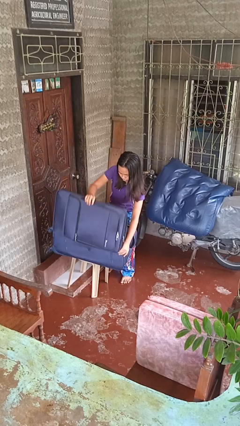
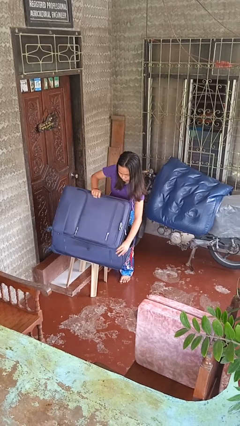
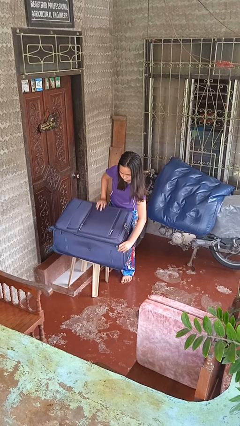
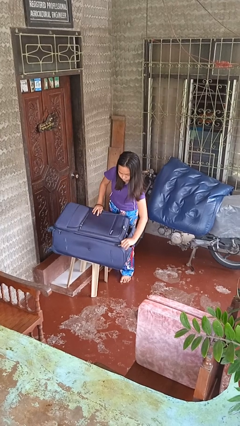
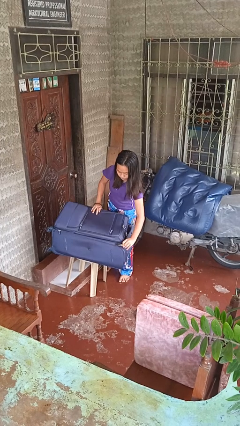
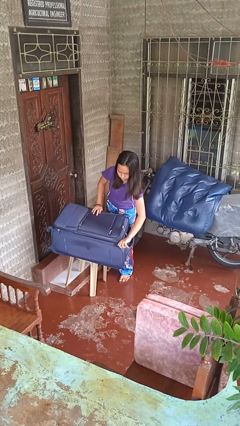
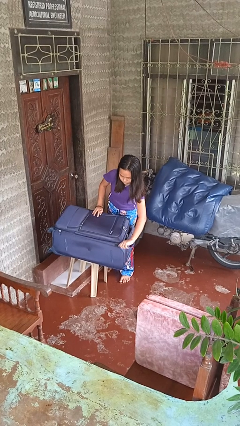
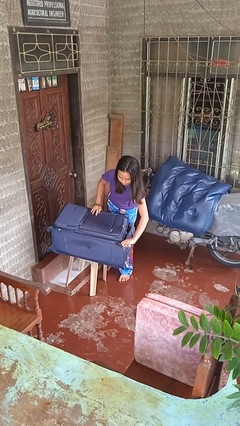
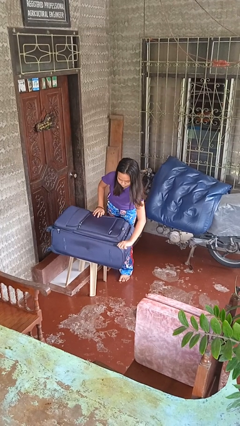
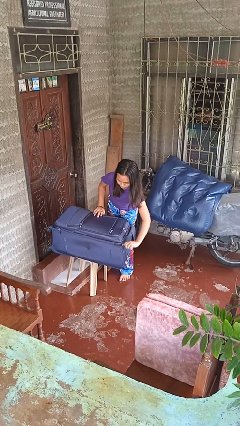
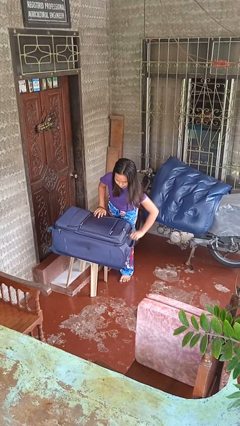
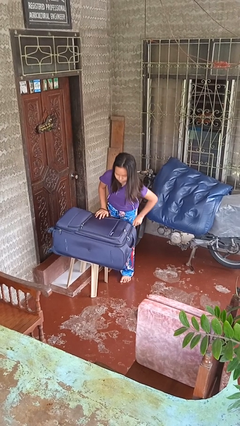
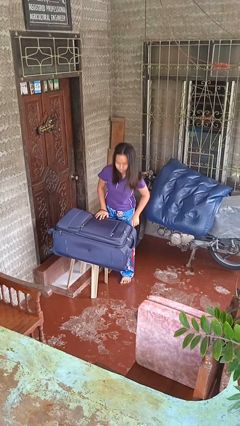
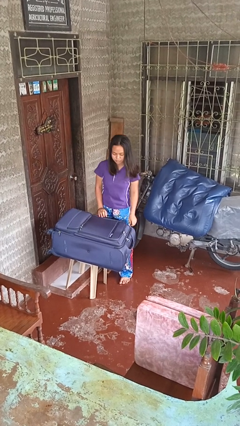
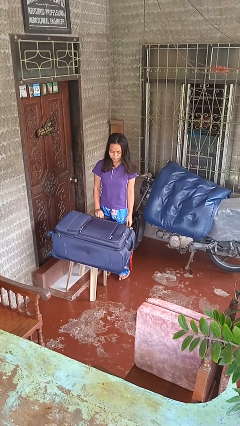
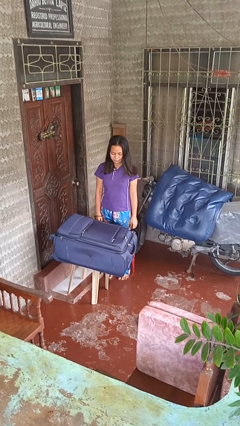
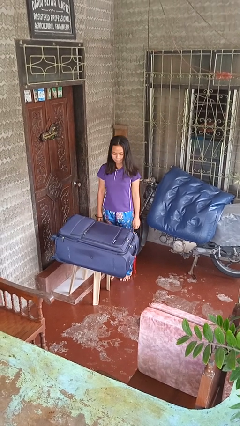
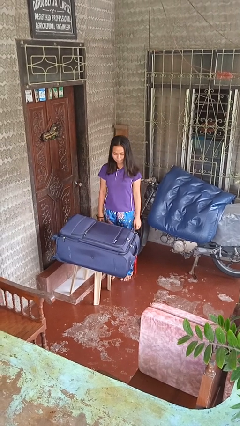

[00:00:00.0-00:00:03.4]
person closes suitcase

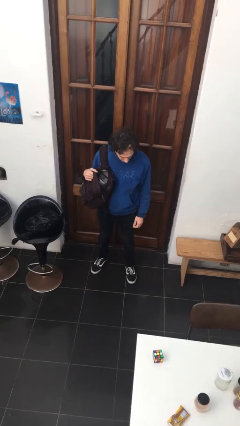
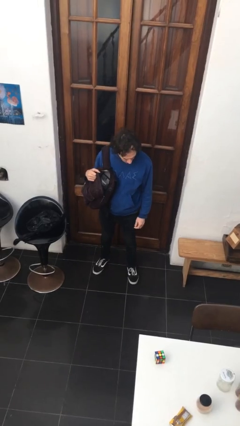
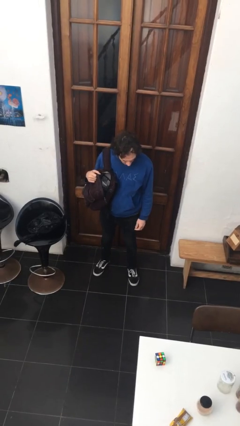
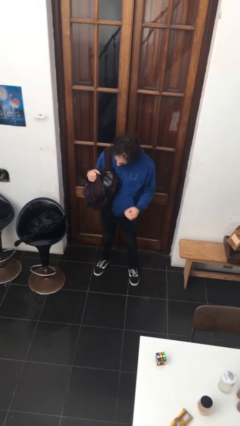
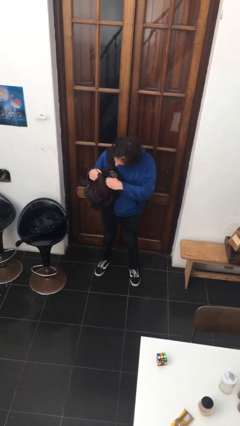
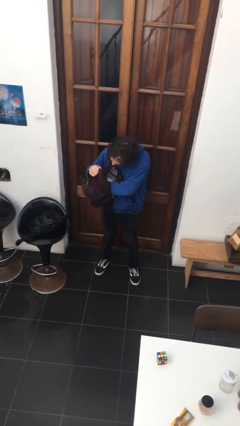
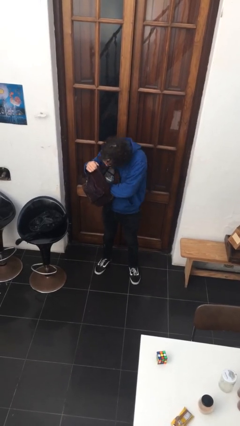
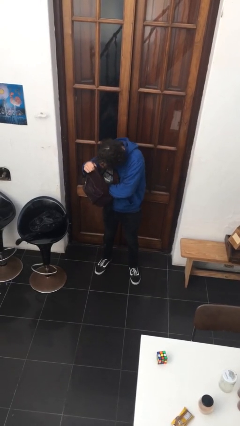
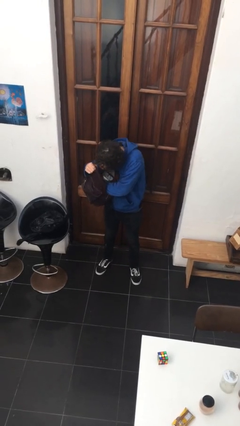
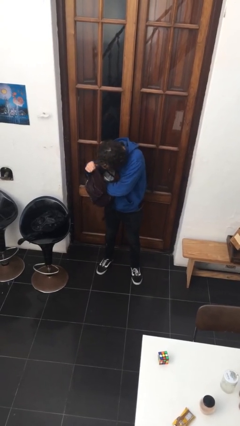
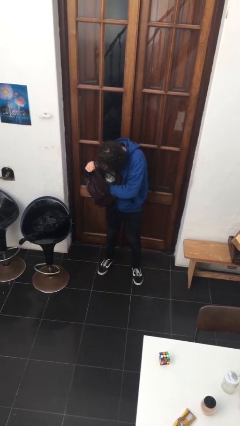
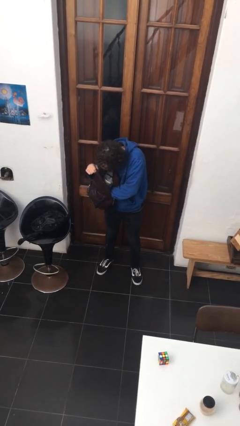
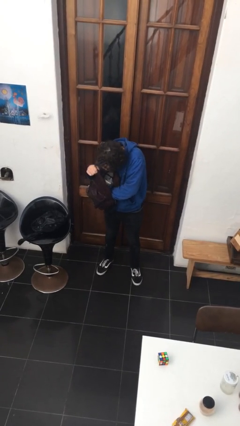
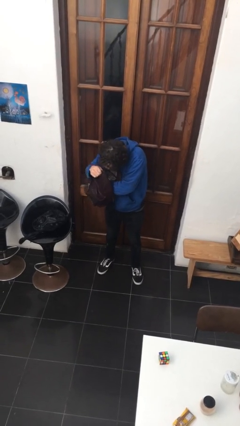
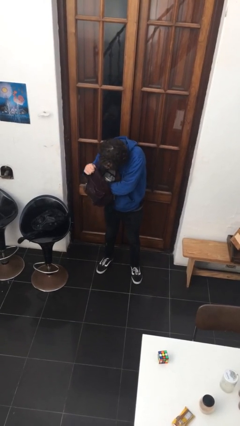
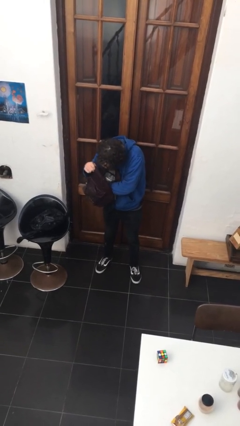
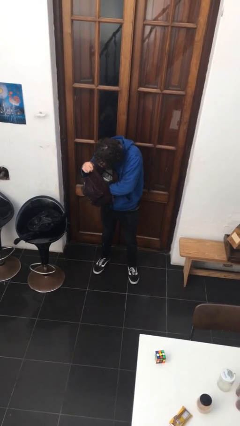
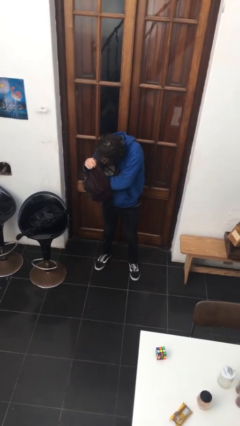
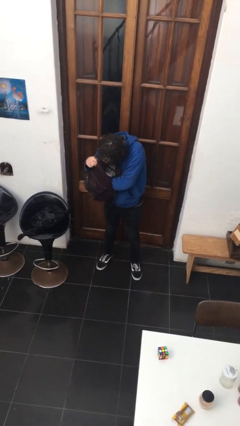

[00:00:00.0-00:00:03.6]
person searches in backpack

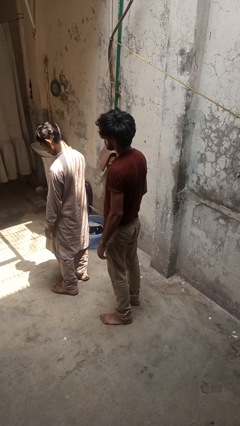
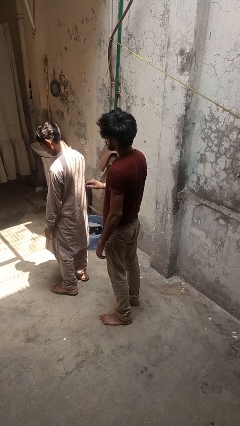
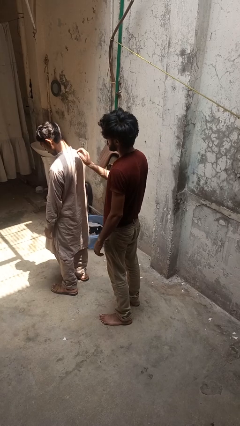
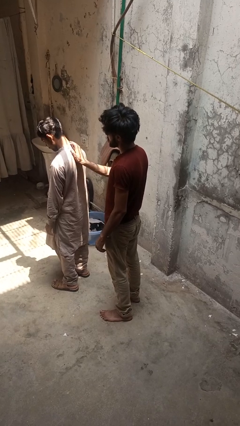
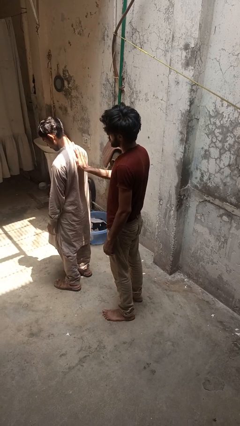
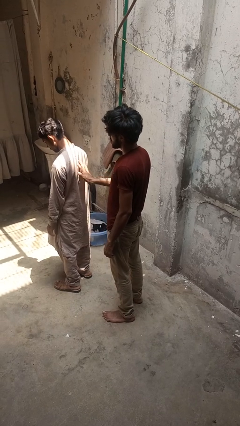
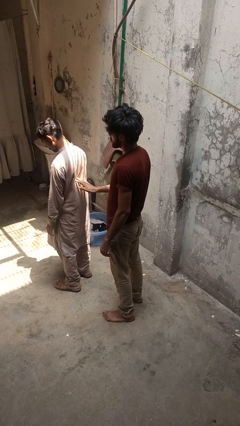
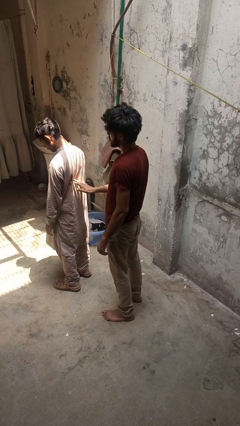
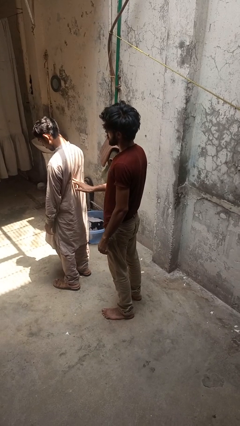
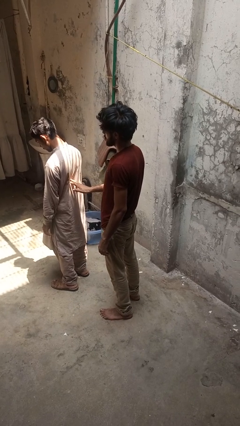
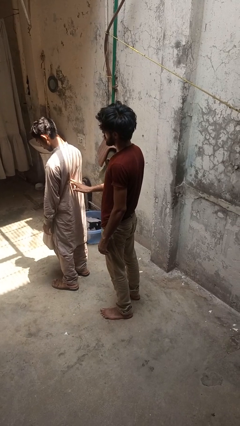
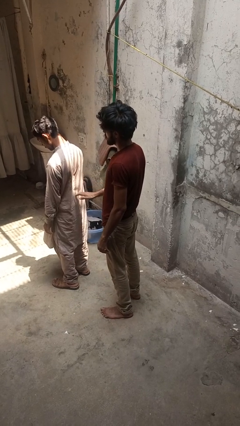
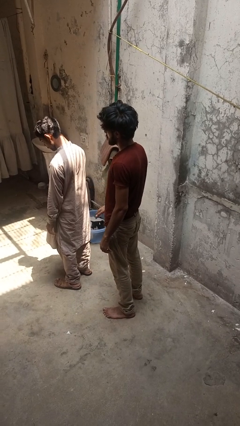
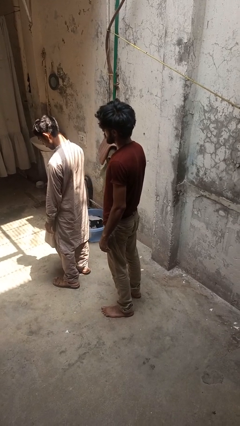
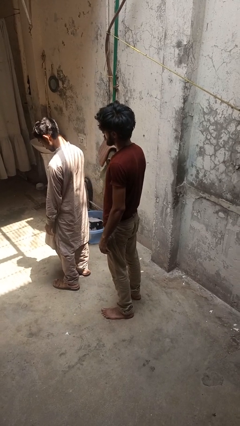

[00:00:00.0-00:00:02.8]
person touches back of person

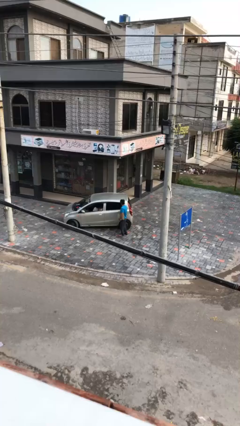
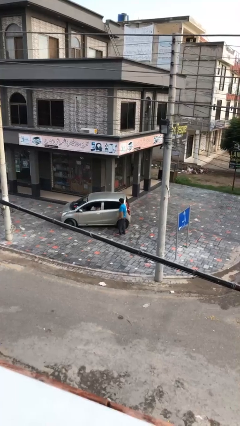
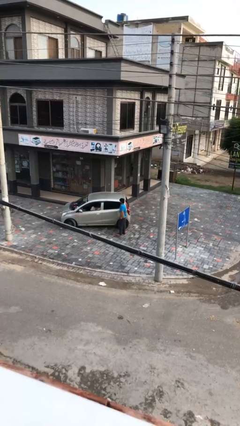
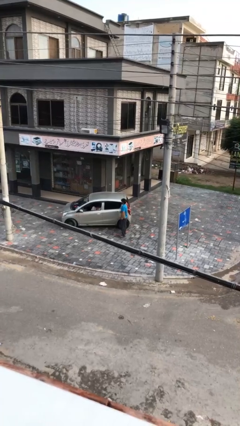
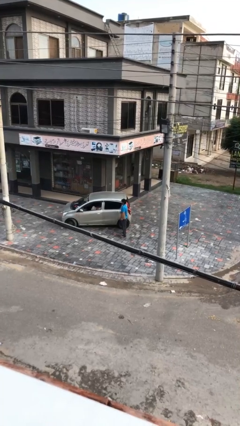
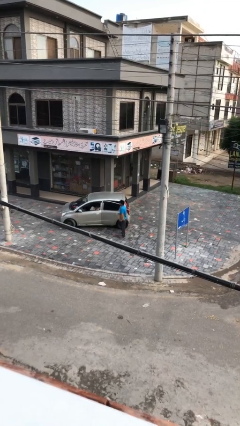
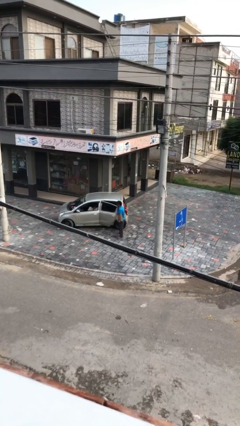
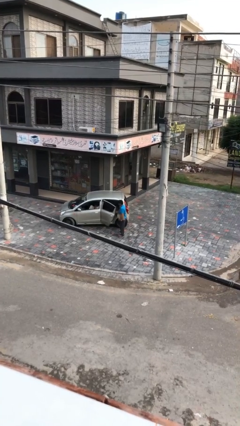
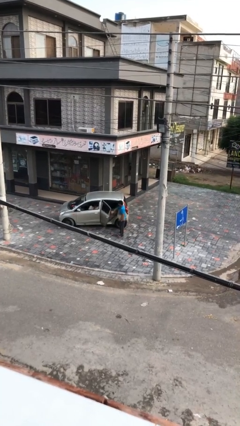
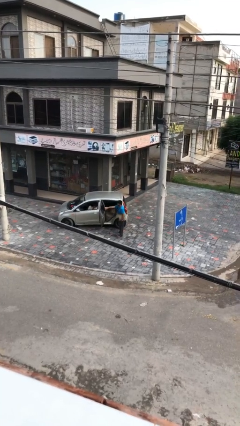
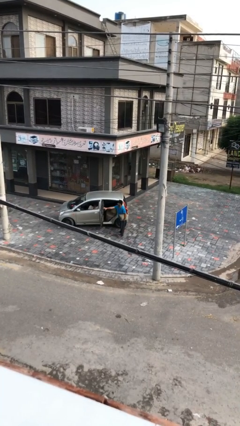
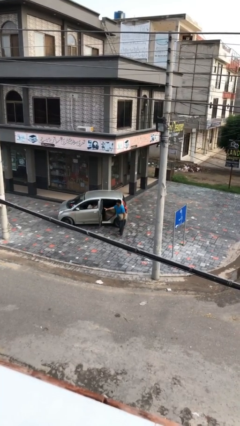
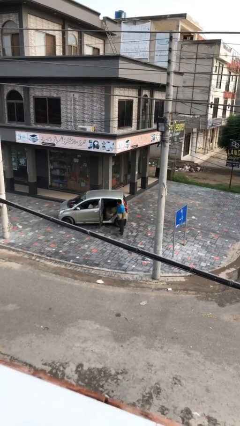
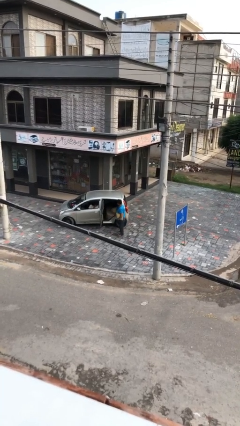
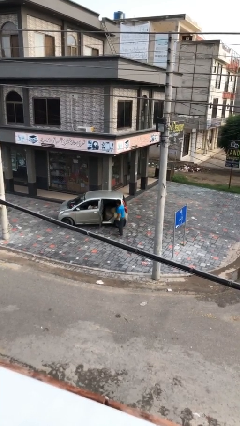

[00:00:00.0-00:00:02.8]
person opens car door

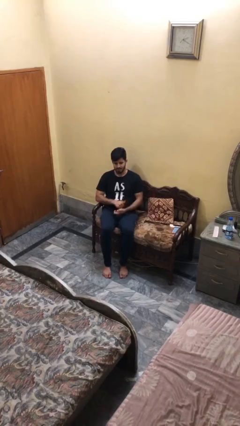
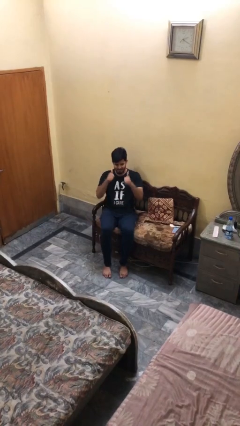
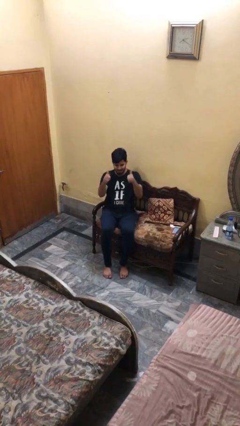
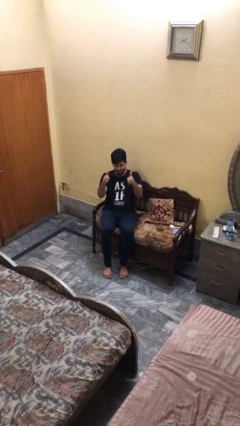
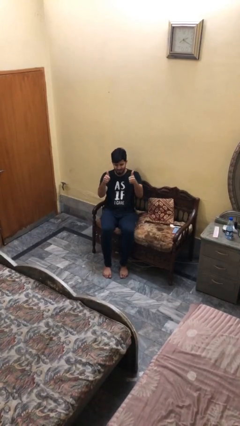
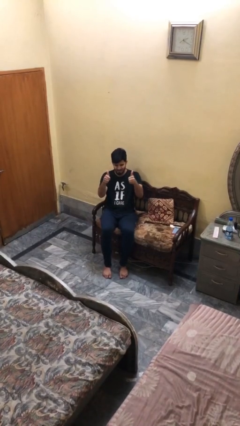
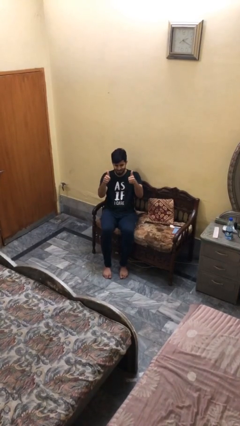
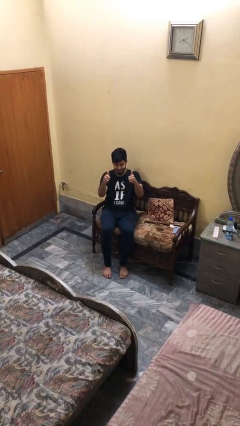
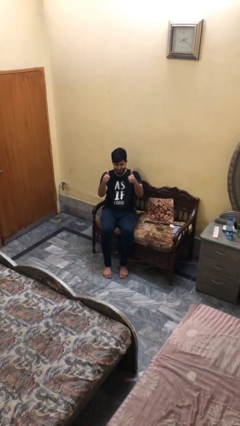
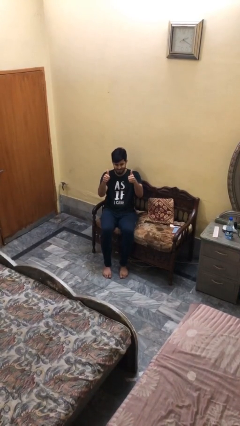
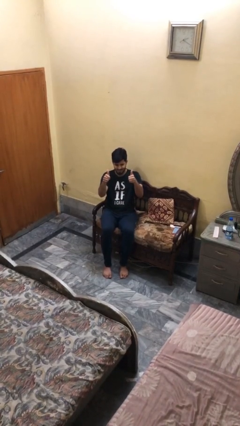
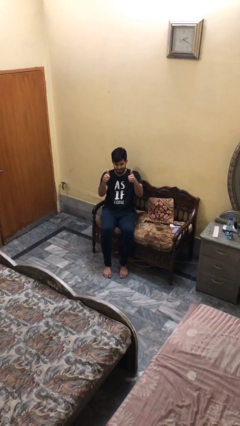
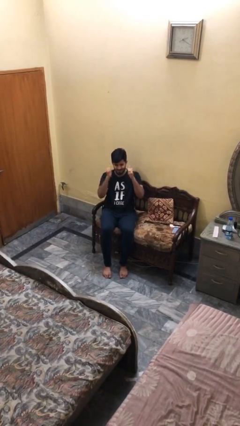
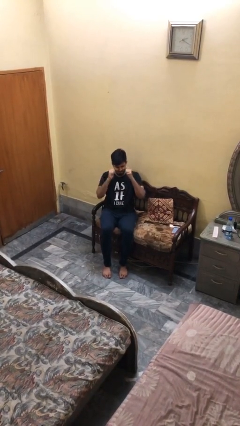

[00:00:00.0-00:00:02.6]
person gestures thumbs up

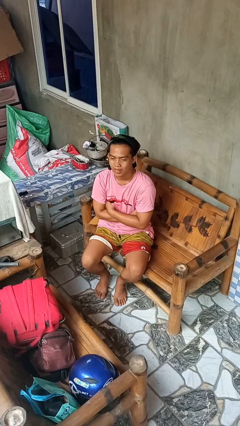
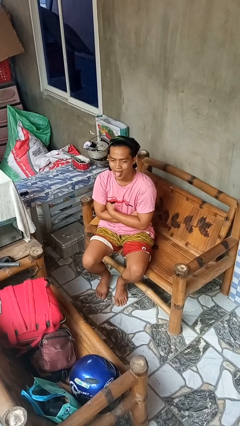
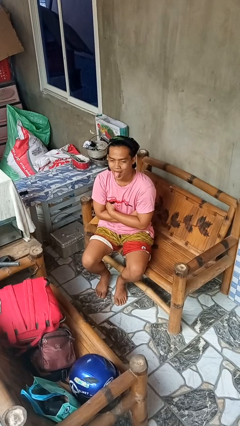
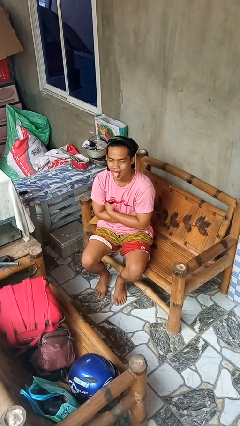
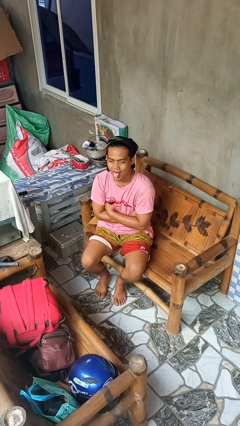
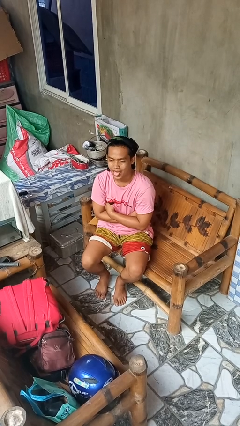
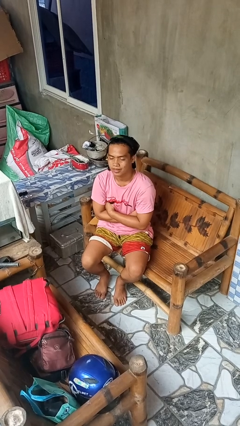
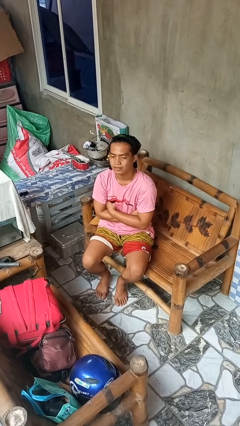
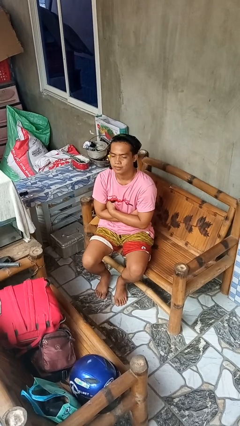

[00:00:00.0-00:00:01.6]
person sticks out tongue

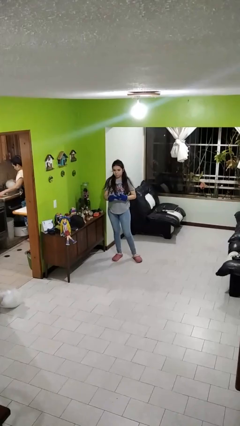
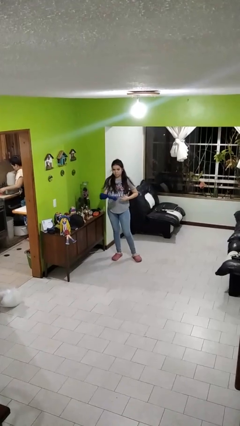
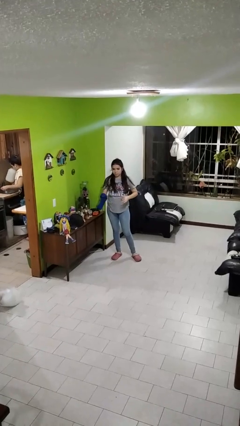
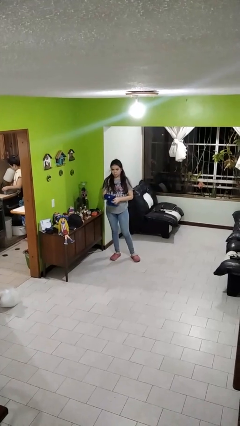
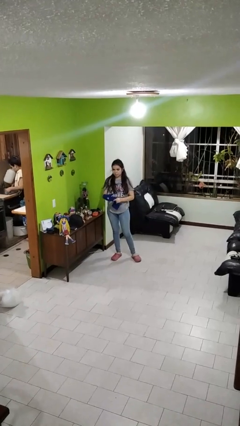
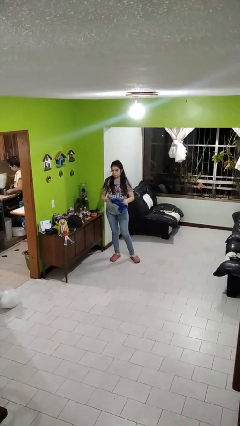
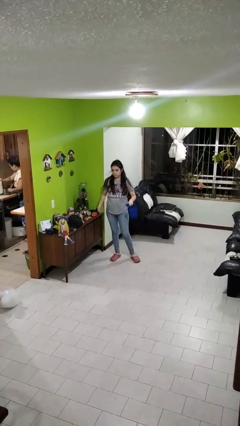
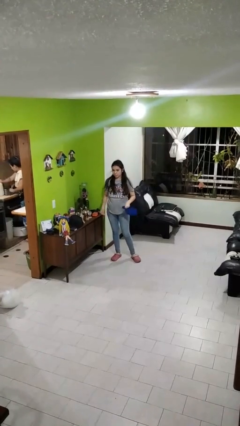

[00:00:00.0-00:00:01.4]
person takes off gloves
